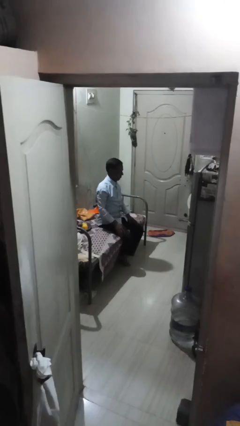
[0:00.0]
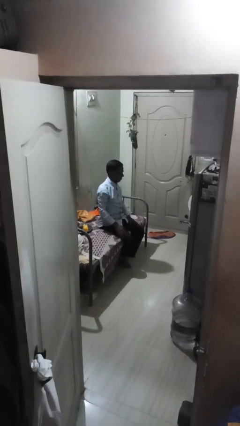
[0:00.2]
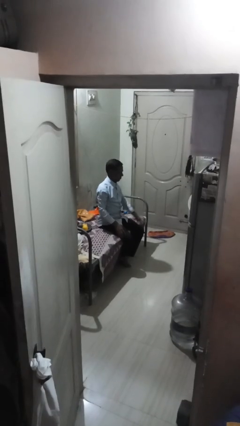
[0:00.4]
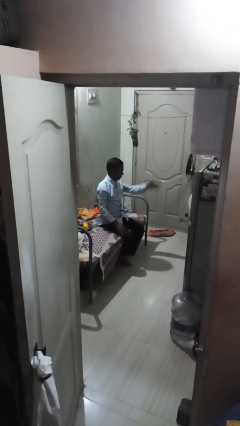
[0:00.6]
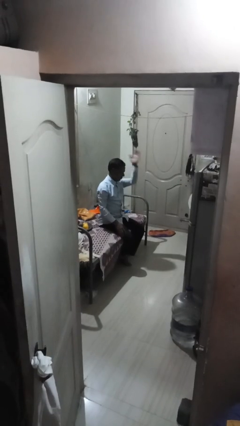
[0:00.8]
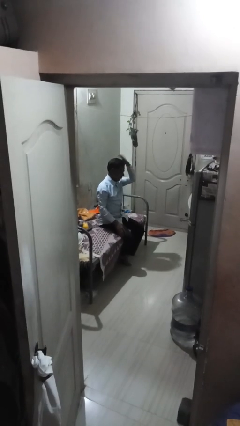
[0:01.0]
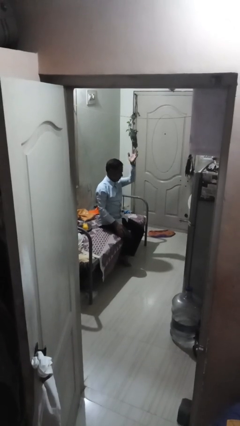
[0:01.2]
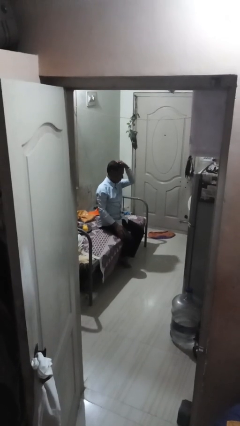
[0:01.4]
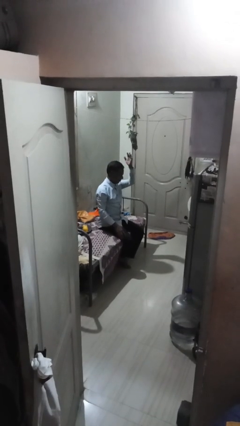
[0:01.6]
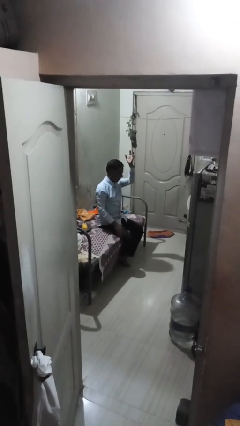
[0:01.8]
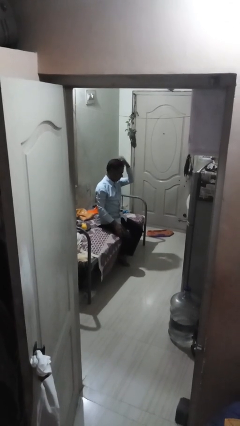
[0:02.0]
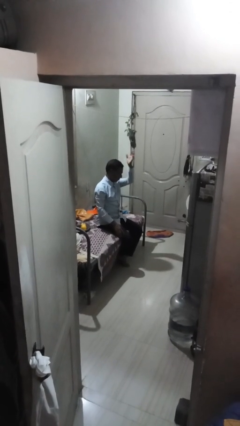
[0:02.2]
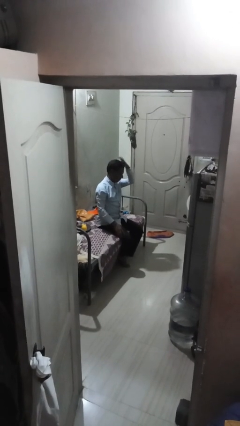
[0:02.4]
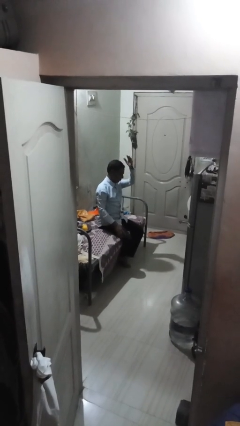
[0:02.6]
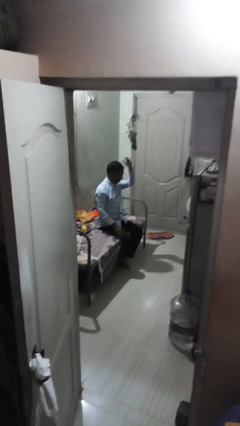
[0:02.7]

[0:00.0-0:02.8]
person pats head

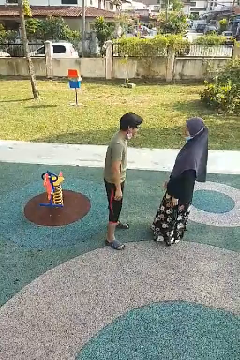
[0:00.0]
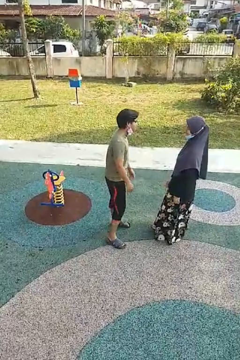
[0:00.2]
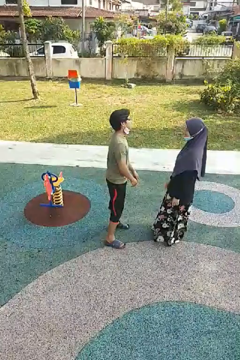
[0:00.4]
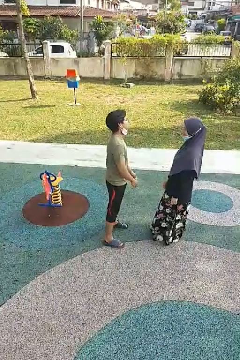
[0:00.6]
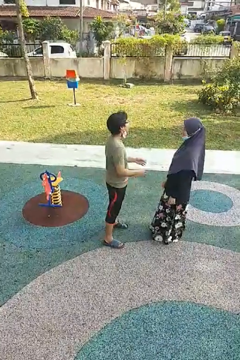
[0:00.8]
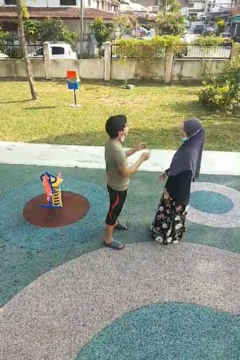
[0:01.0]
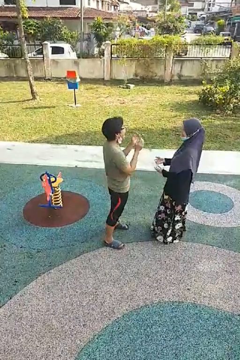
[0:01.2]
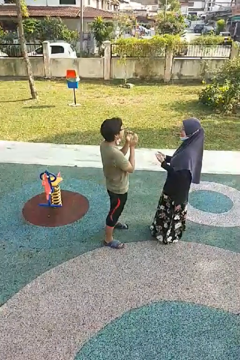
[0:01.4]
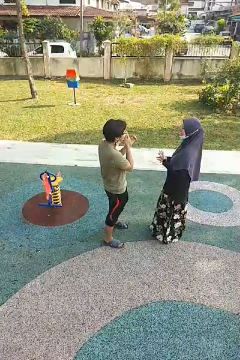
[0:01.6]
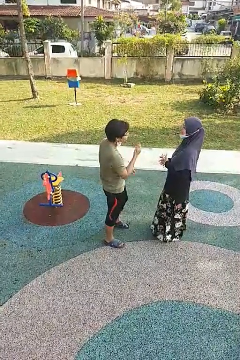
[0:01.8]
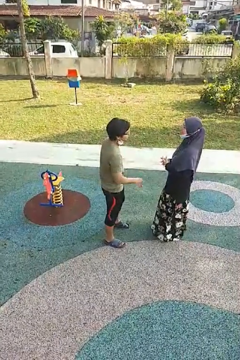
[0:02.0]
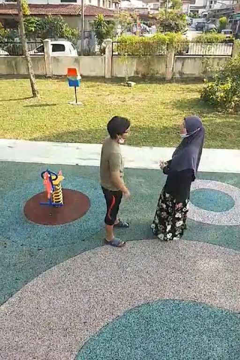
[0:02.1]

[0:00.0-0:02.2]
person laughs with person

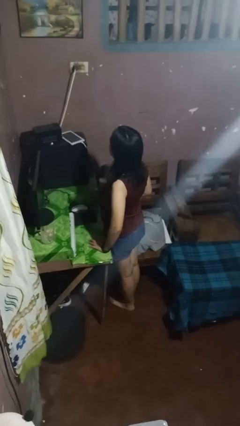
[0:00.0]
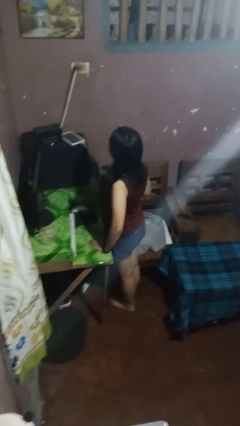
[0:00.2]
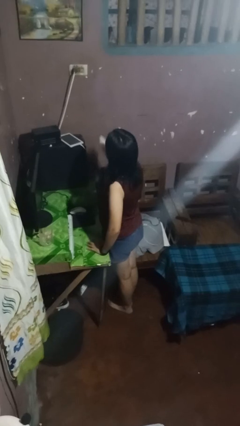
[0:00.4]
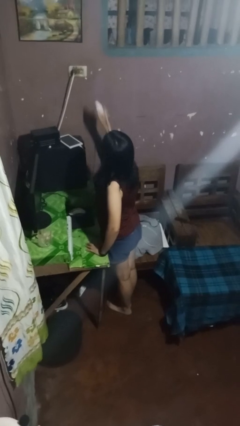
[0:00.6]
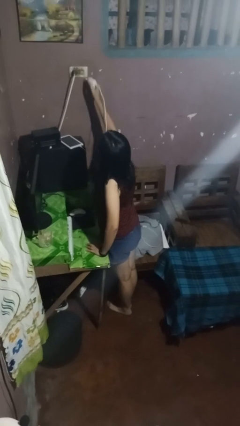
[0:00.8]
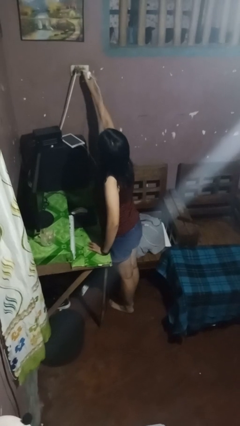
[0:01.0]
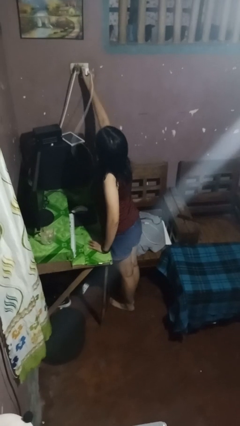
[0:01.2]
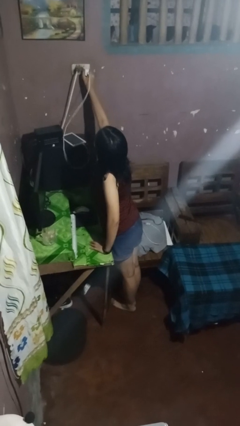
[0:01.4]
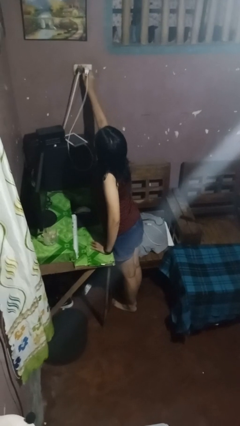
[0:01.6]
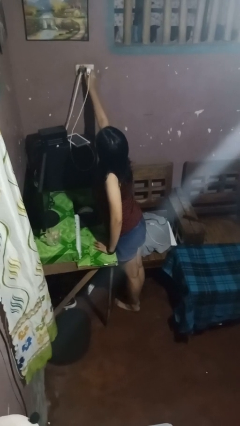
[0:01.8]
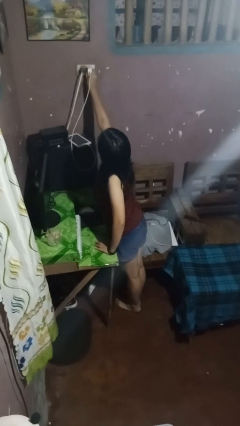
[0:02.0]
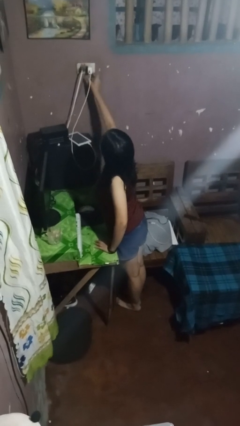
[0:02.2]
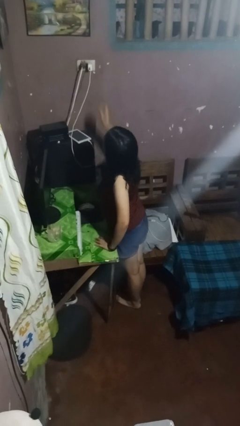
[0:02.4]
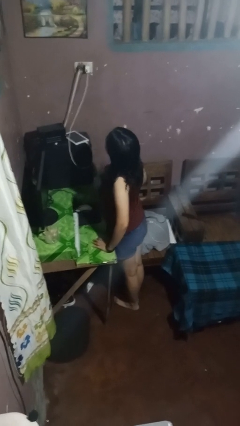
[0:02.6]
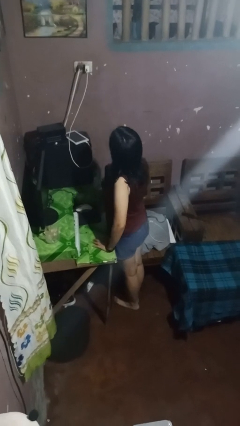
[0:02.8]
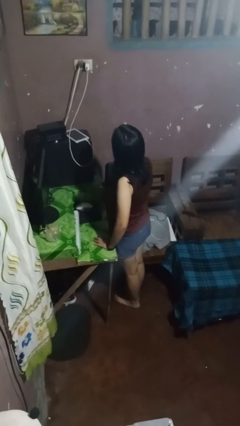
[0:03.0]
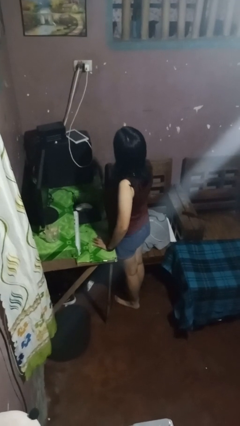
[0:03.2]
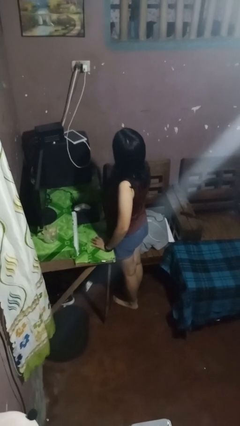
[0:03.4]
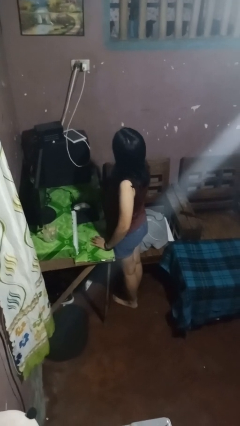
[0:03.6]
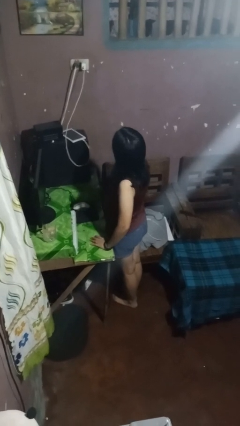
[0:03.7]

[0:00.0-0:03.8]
person plugs into electrical socket

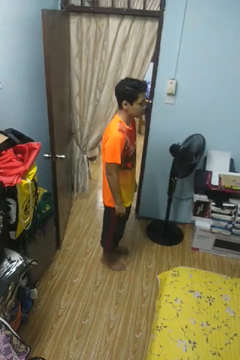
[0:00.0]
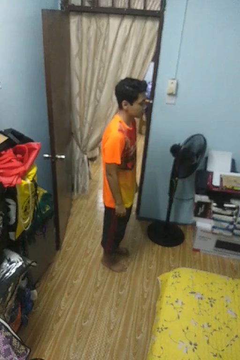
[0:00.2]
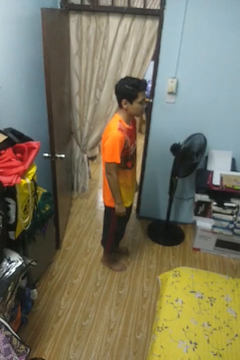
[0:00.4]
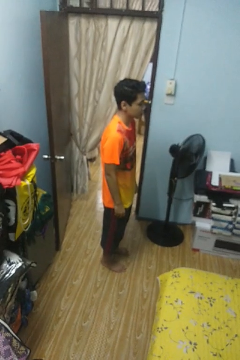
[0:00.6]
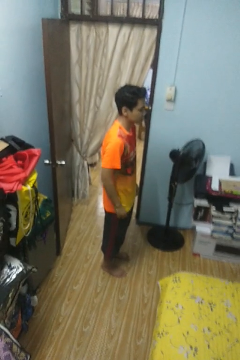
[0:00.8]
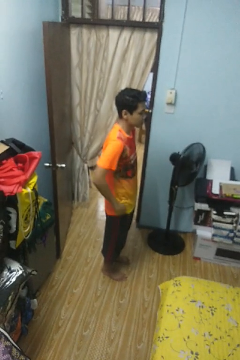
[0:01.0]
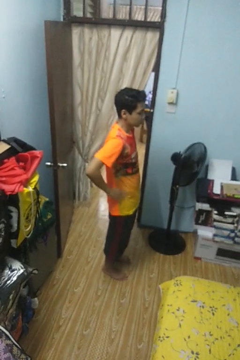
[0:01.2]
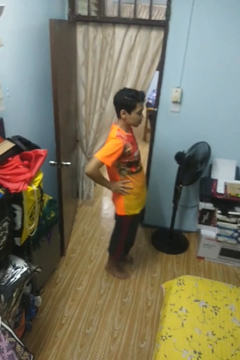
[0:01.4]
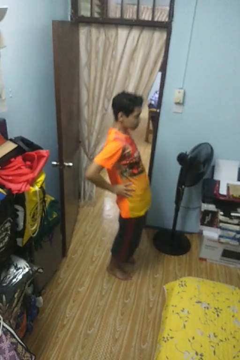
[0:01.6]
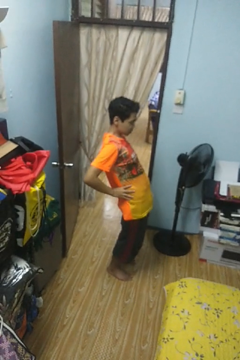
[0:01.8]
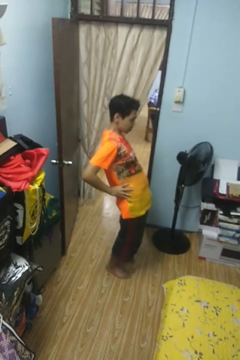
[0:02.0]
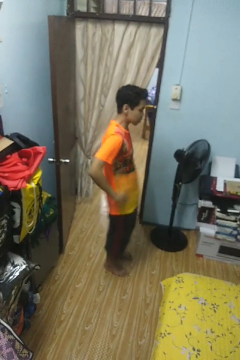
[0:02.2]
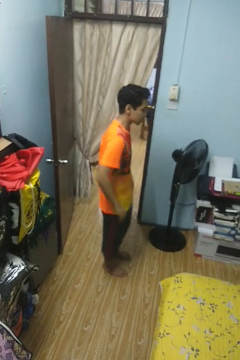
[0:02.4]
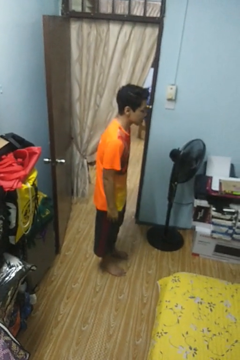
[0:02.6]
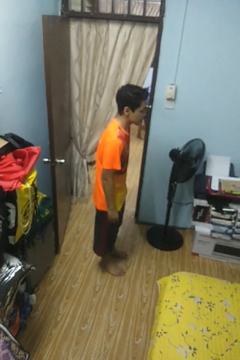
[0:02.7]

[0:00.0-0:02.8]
person stretches back

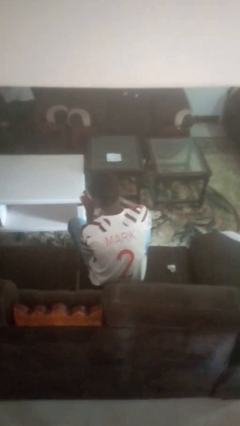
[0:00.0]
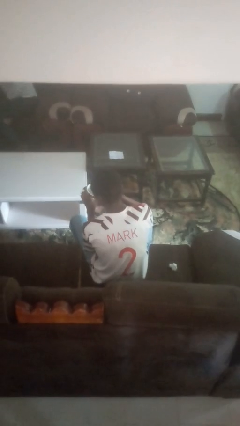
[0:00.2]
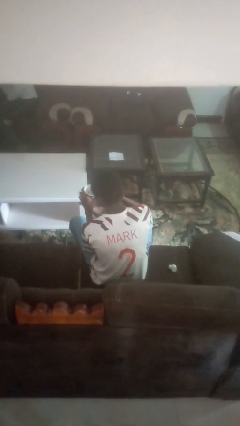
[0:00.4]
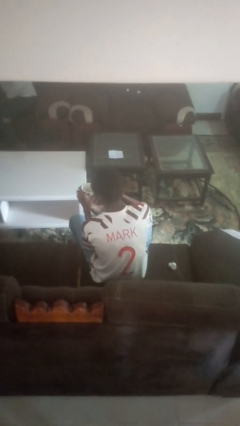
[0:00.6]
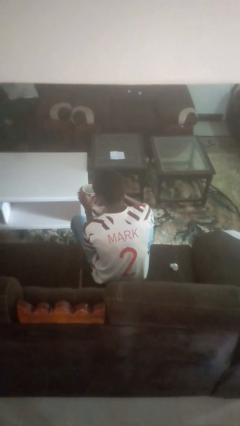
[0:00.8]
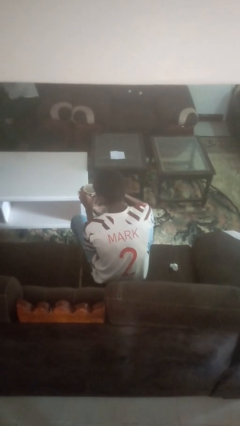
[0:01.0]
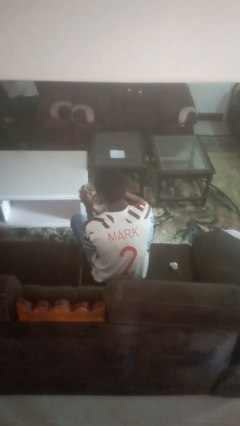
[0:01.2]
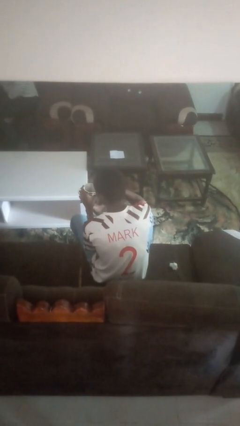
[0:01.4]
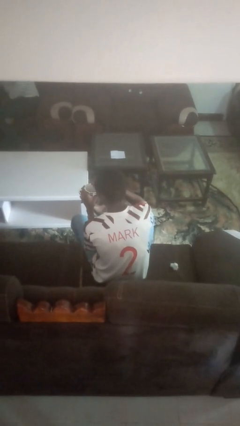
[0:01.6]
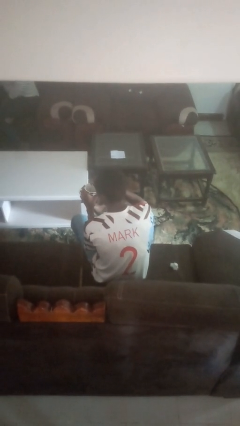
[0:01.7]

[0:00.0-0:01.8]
person stirs mug

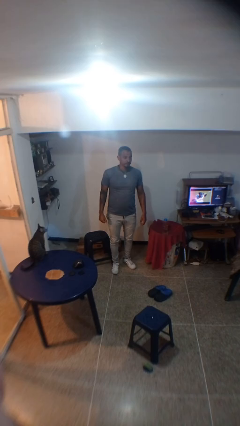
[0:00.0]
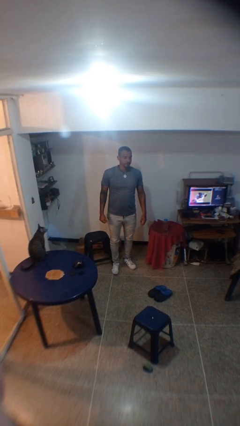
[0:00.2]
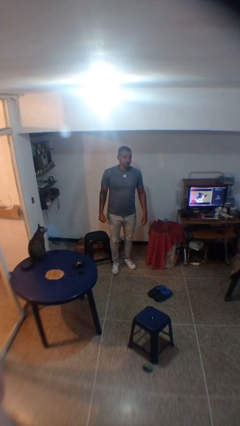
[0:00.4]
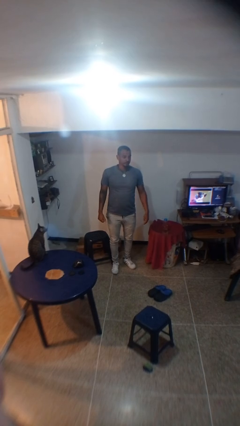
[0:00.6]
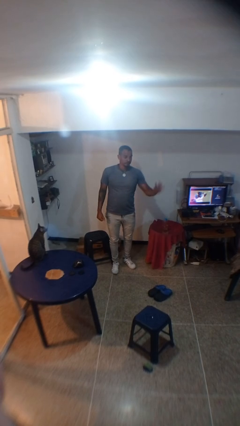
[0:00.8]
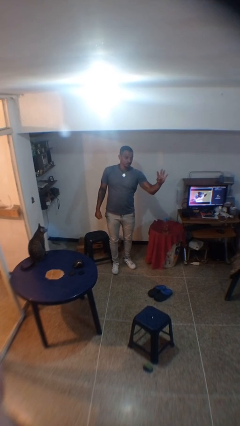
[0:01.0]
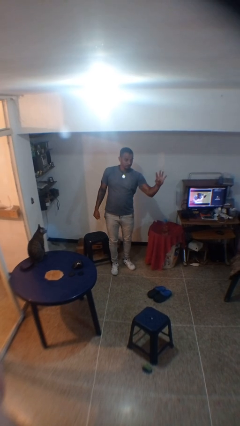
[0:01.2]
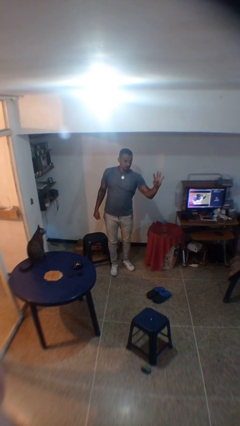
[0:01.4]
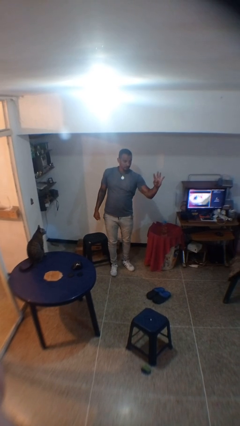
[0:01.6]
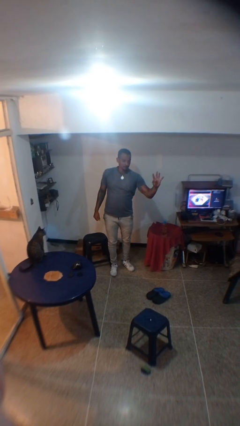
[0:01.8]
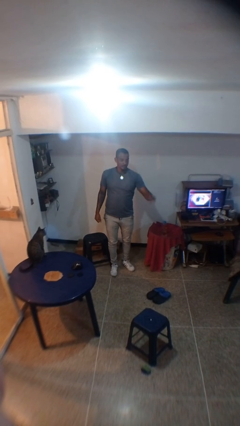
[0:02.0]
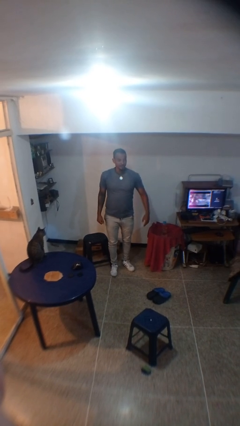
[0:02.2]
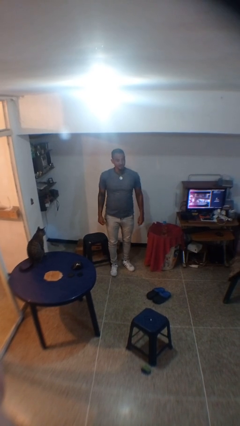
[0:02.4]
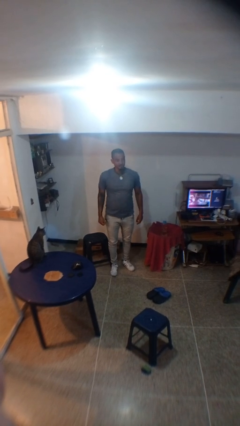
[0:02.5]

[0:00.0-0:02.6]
person gestures number four

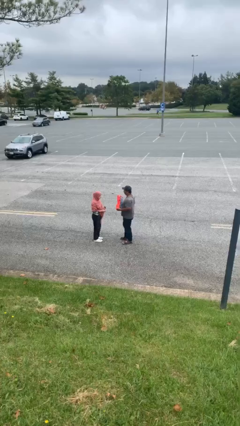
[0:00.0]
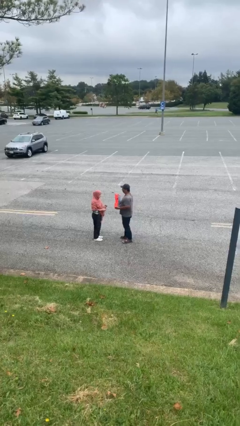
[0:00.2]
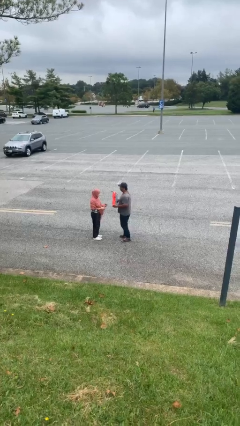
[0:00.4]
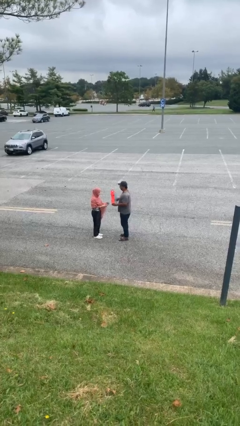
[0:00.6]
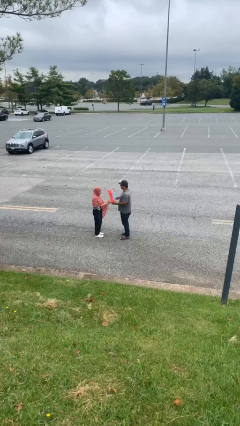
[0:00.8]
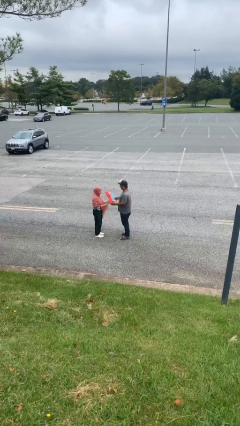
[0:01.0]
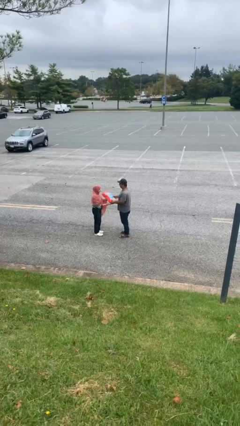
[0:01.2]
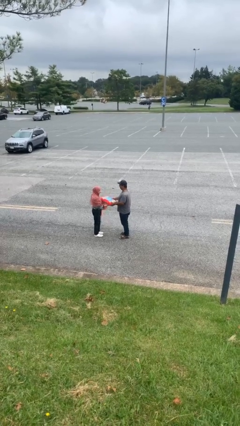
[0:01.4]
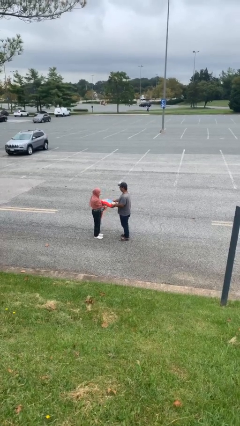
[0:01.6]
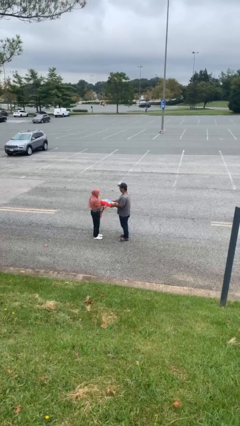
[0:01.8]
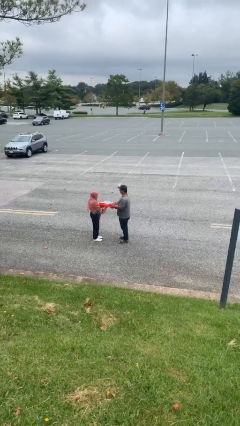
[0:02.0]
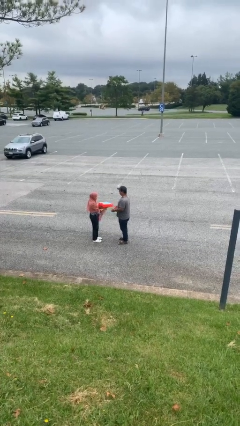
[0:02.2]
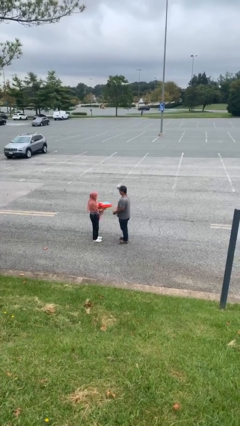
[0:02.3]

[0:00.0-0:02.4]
person transfers object to person
